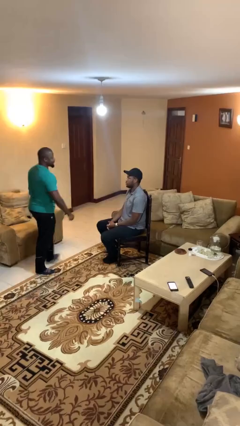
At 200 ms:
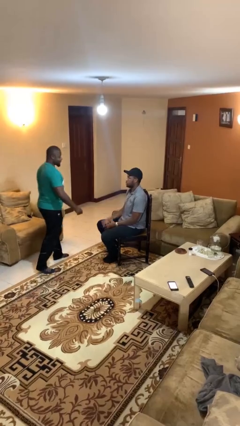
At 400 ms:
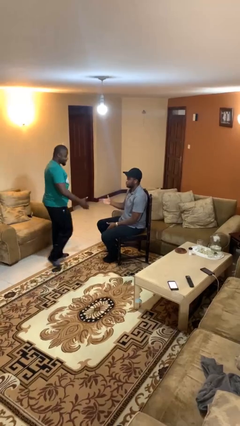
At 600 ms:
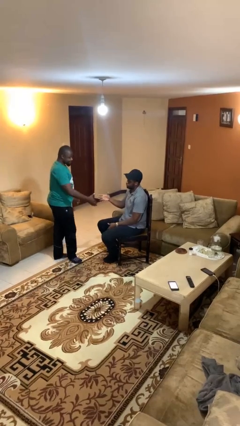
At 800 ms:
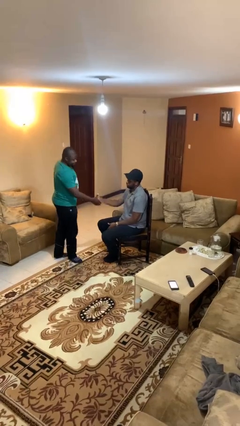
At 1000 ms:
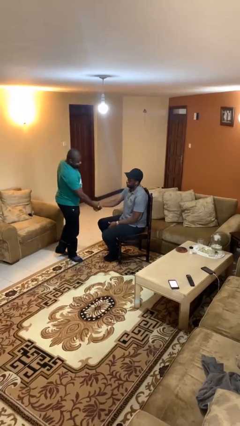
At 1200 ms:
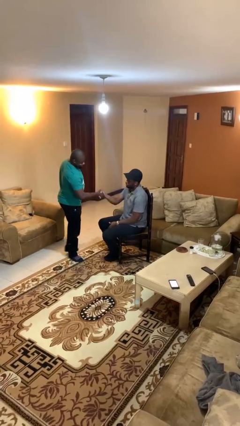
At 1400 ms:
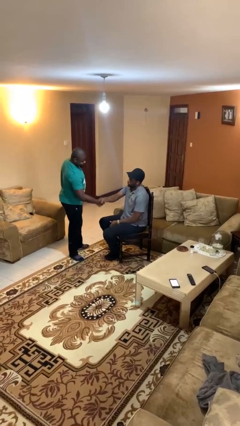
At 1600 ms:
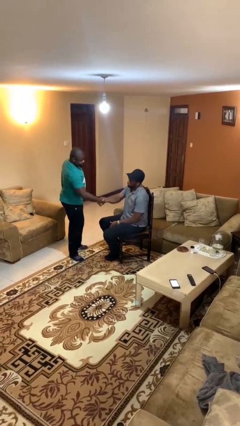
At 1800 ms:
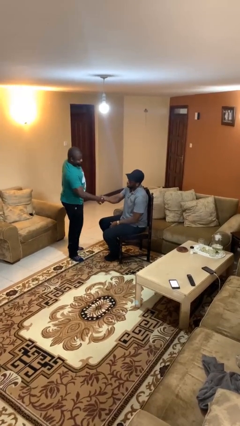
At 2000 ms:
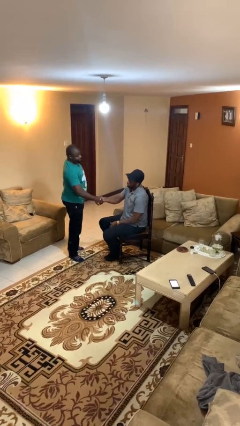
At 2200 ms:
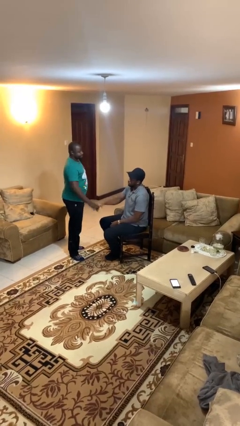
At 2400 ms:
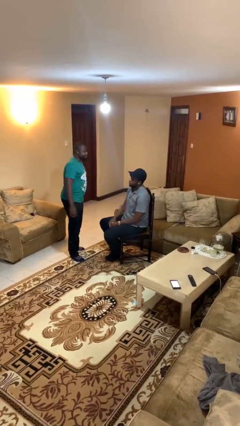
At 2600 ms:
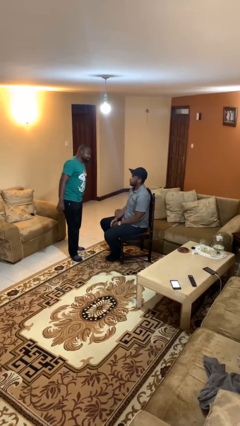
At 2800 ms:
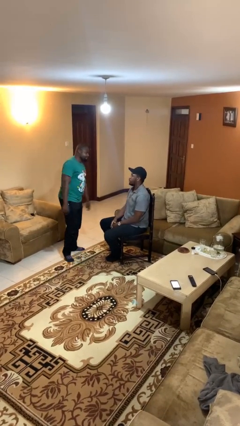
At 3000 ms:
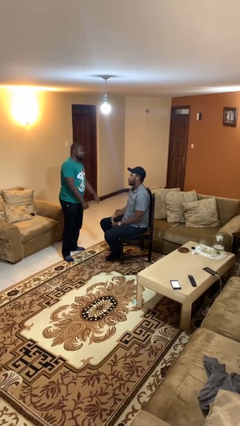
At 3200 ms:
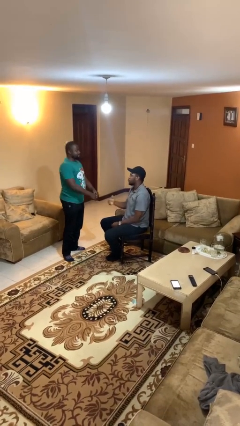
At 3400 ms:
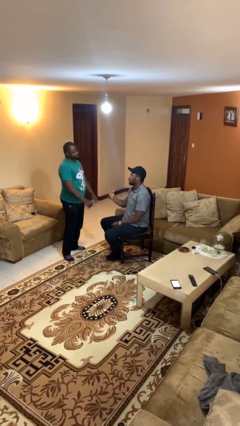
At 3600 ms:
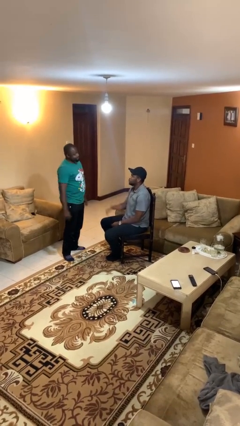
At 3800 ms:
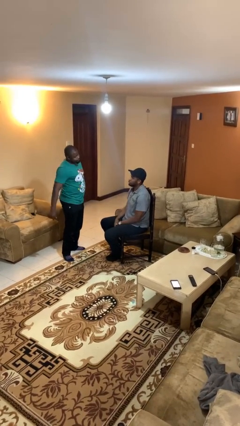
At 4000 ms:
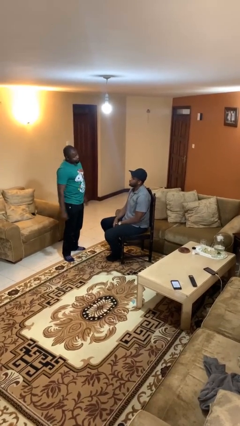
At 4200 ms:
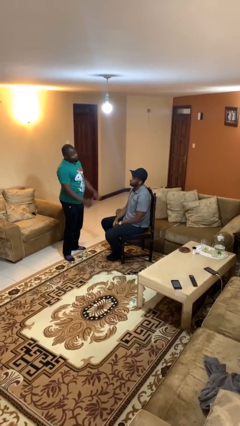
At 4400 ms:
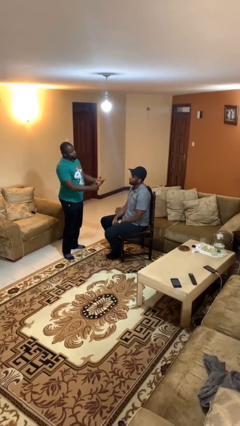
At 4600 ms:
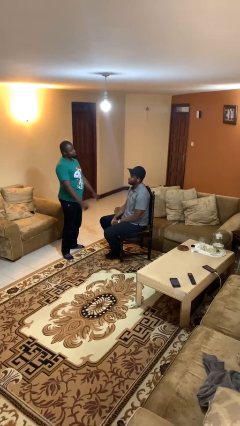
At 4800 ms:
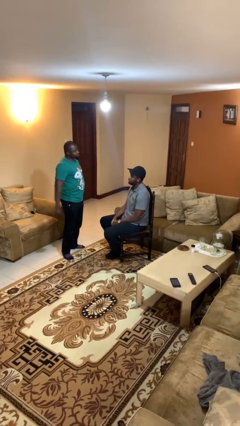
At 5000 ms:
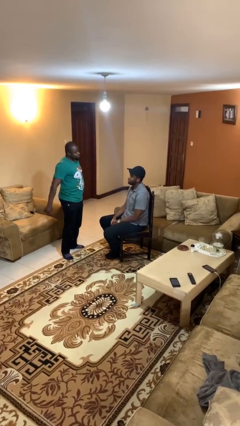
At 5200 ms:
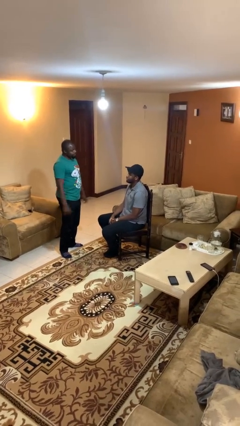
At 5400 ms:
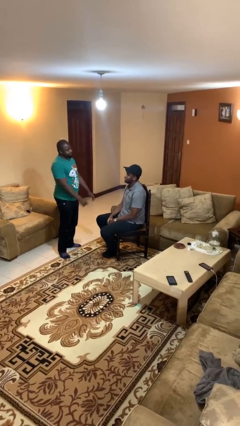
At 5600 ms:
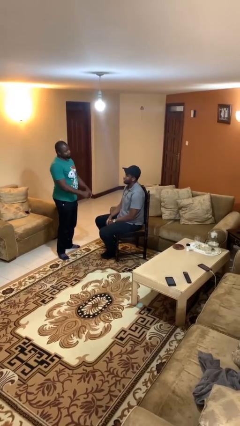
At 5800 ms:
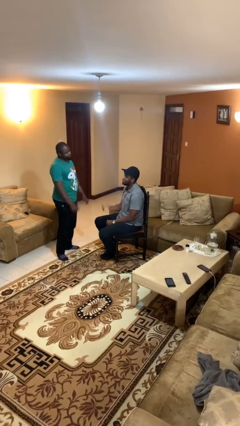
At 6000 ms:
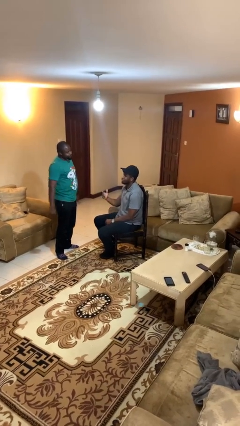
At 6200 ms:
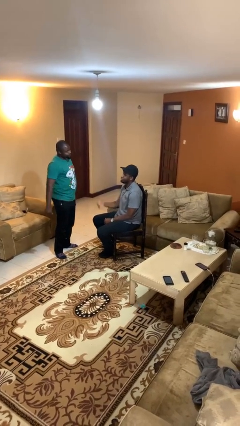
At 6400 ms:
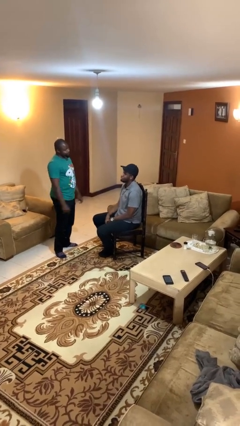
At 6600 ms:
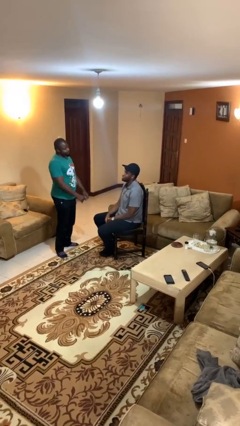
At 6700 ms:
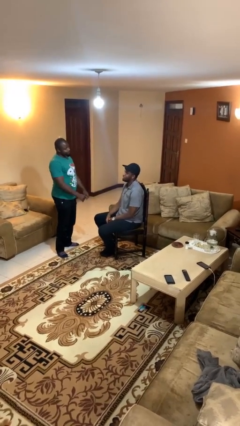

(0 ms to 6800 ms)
person shakes hand

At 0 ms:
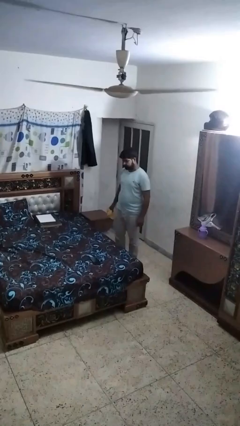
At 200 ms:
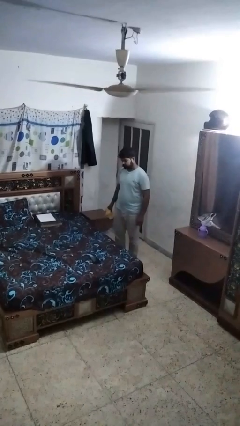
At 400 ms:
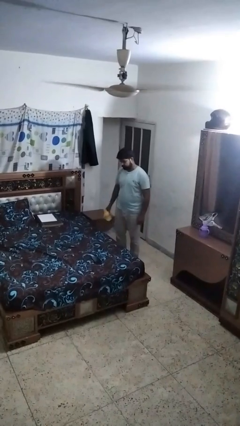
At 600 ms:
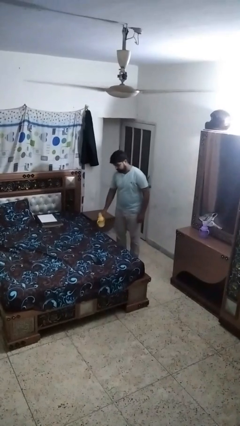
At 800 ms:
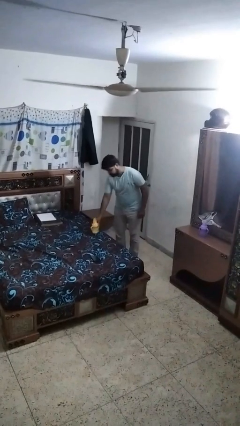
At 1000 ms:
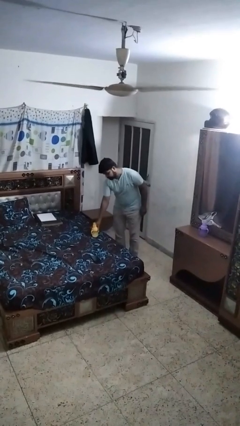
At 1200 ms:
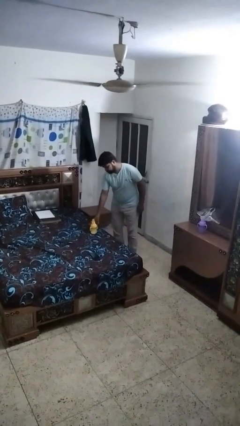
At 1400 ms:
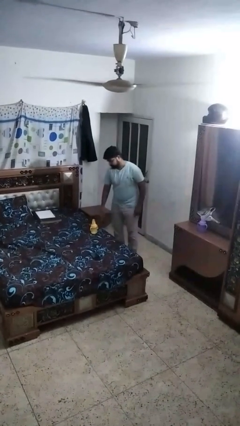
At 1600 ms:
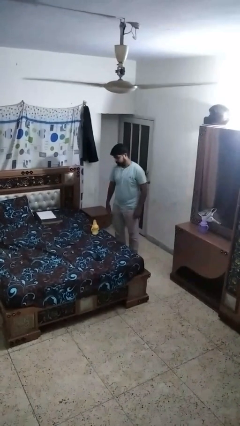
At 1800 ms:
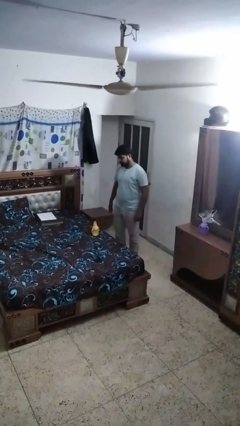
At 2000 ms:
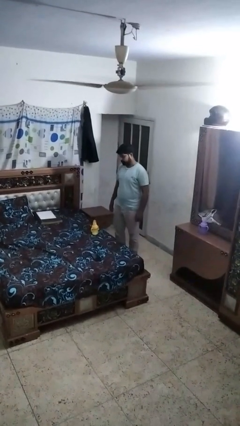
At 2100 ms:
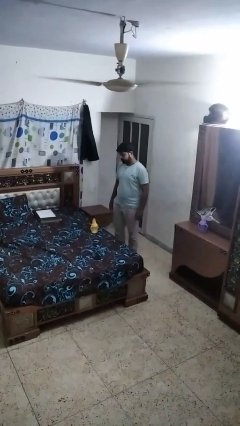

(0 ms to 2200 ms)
person puts down object on bed

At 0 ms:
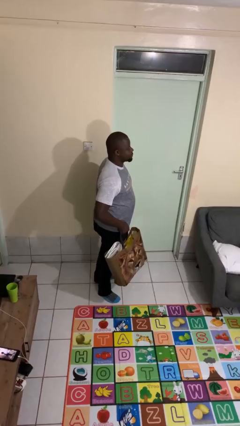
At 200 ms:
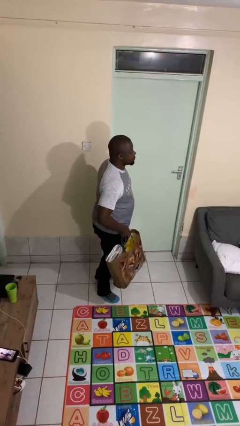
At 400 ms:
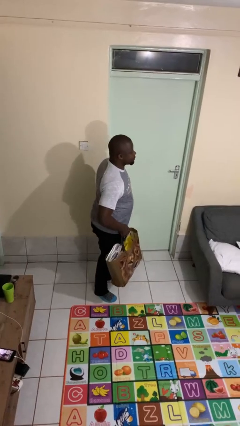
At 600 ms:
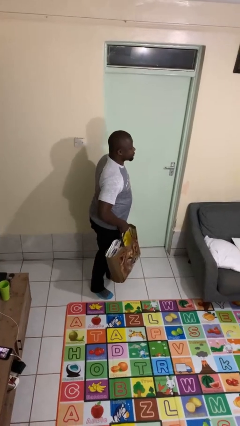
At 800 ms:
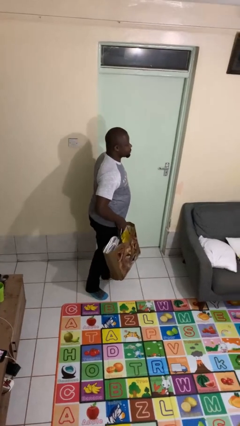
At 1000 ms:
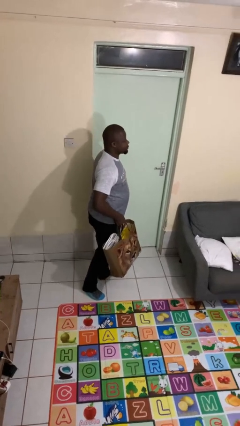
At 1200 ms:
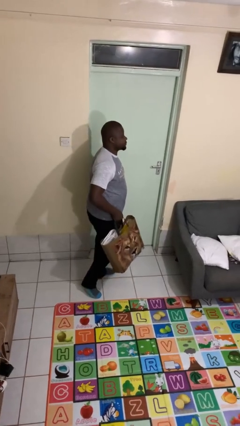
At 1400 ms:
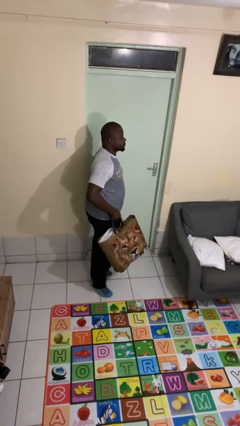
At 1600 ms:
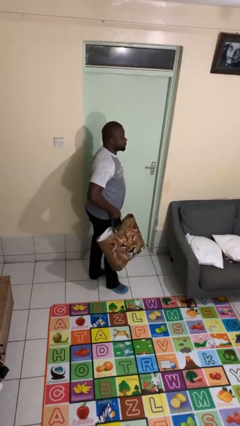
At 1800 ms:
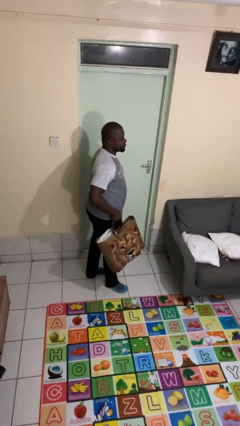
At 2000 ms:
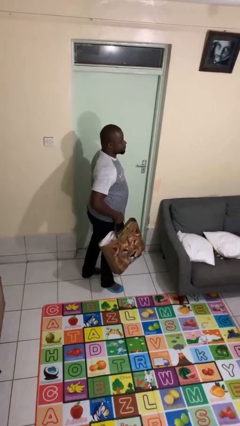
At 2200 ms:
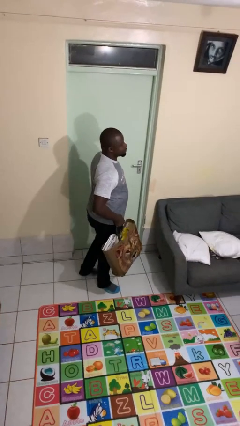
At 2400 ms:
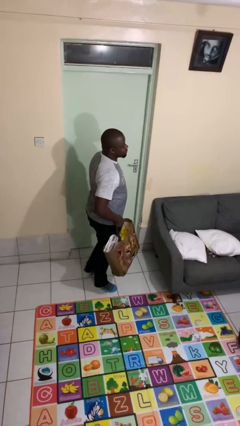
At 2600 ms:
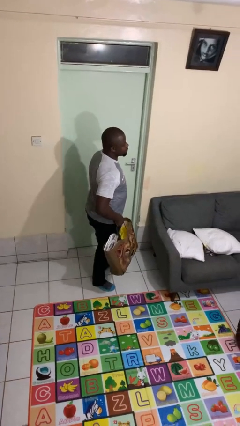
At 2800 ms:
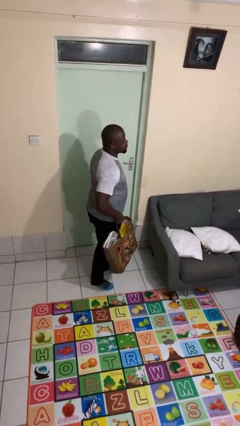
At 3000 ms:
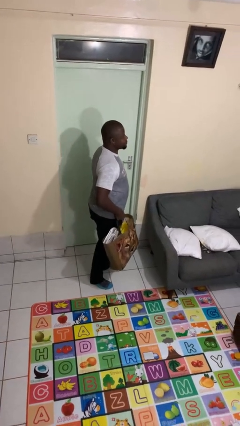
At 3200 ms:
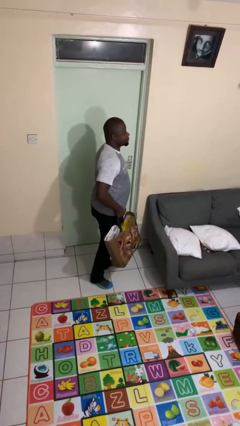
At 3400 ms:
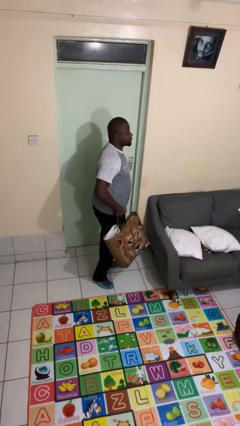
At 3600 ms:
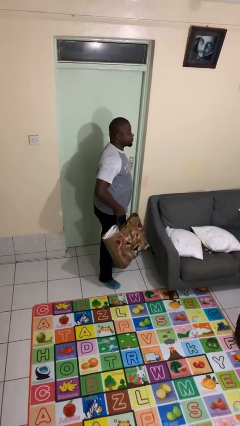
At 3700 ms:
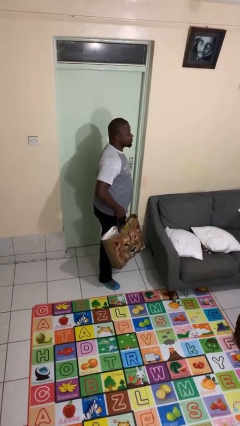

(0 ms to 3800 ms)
person carries groceries

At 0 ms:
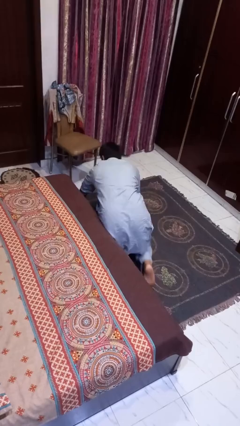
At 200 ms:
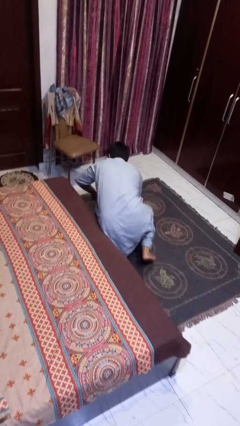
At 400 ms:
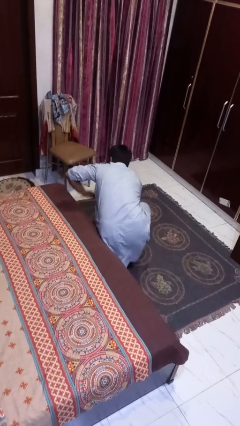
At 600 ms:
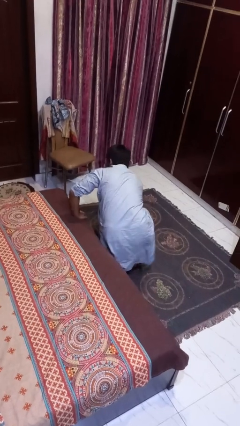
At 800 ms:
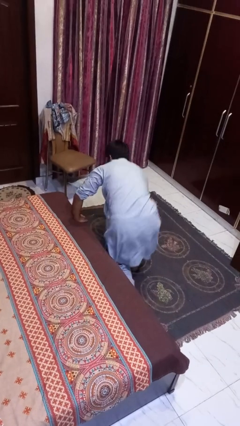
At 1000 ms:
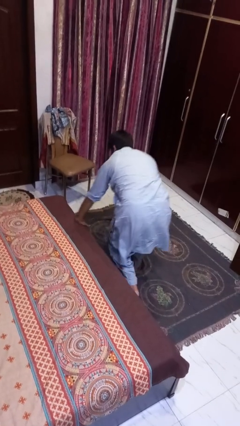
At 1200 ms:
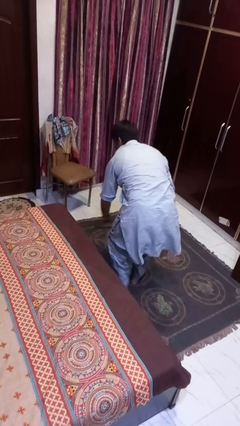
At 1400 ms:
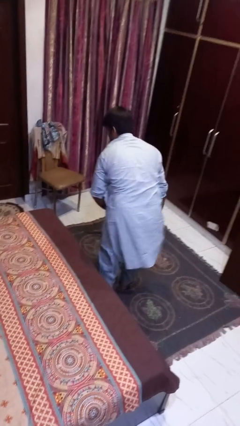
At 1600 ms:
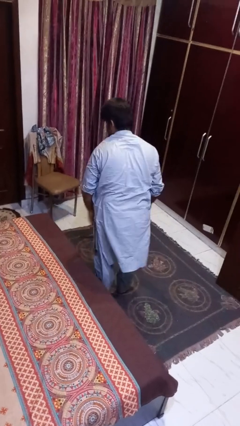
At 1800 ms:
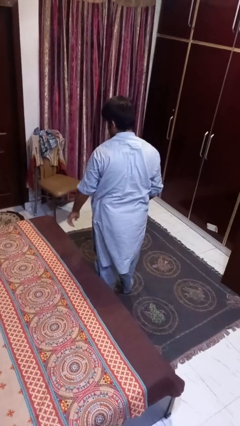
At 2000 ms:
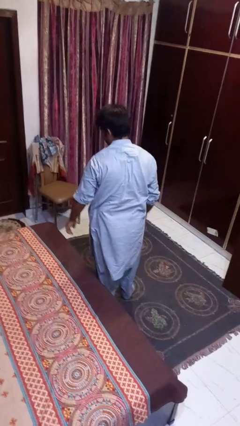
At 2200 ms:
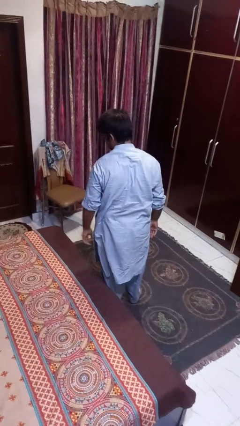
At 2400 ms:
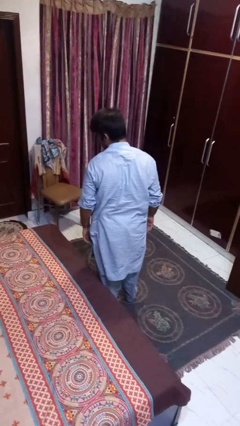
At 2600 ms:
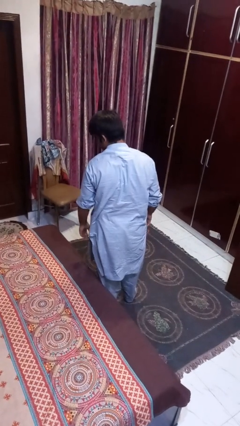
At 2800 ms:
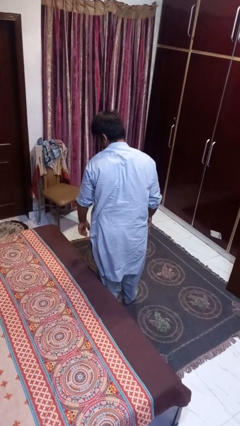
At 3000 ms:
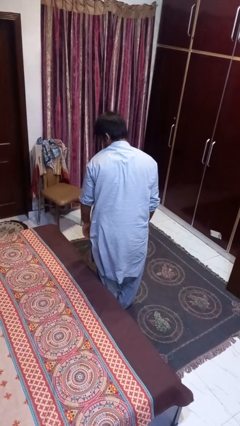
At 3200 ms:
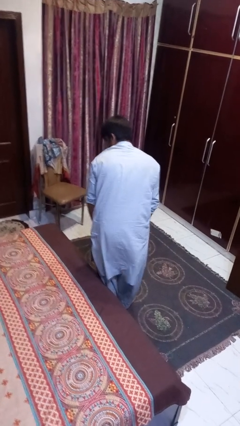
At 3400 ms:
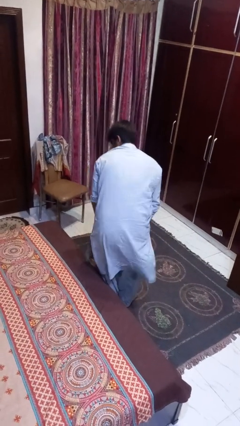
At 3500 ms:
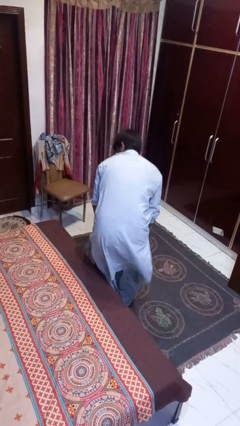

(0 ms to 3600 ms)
person stands up from floor

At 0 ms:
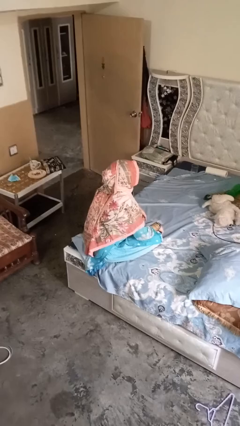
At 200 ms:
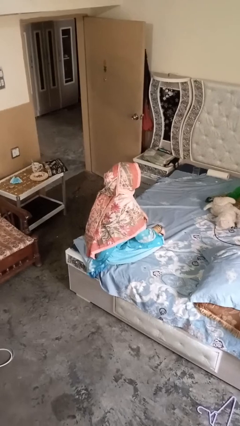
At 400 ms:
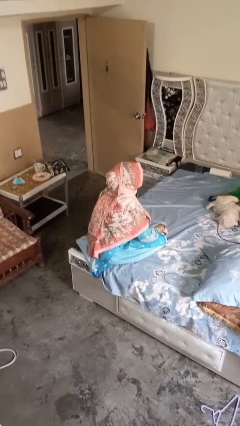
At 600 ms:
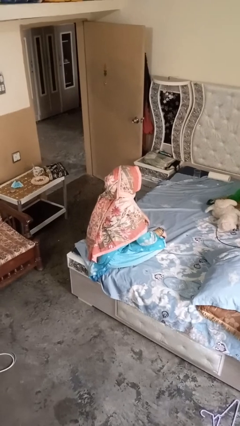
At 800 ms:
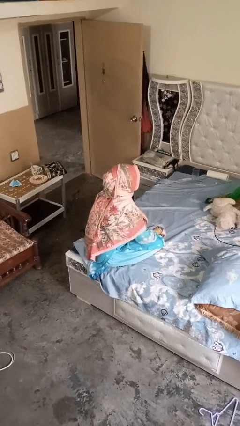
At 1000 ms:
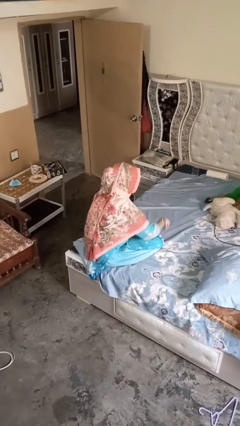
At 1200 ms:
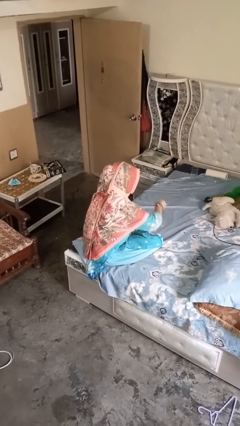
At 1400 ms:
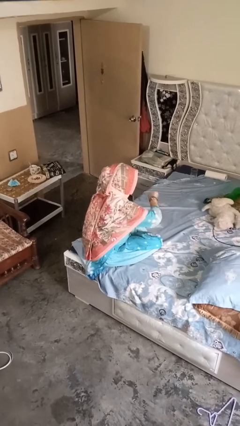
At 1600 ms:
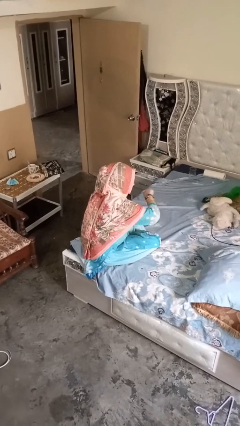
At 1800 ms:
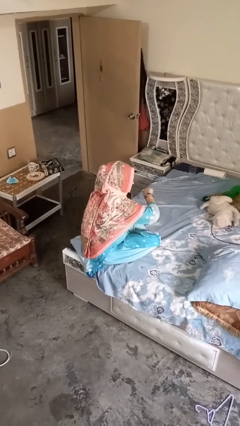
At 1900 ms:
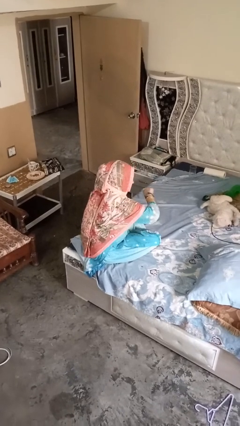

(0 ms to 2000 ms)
person gestures watch closely
